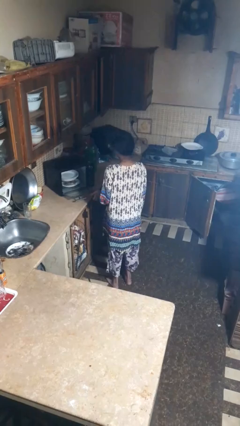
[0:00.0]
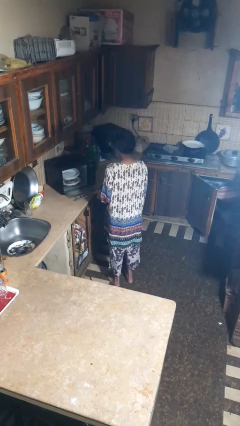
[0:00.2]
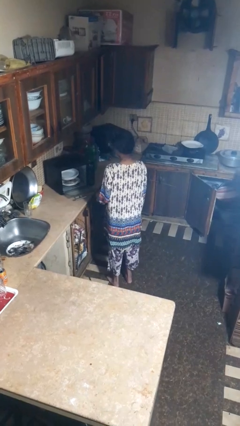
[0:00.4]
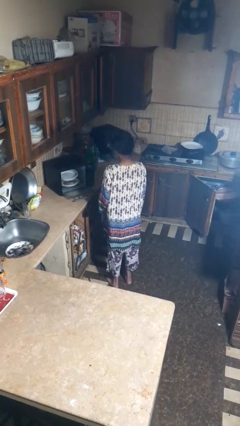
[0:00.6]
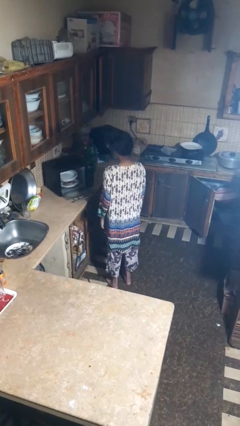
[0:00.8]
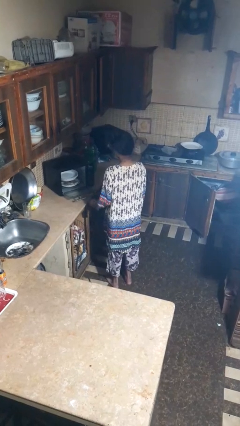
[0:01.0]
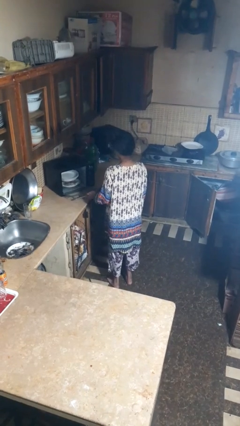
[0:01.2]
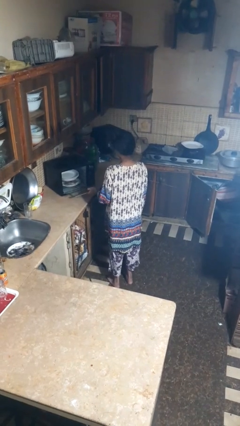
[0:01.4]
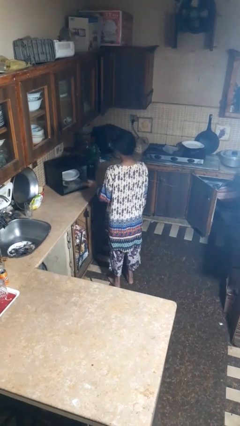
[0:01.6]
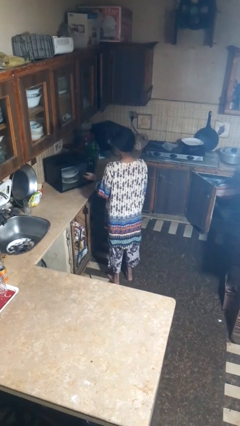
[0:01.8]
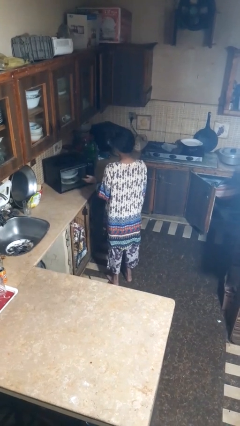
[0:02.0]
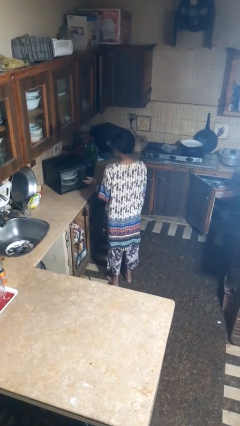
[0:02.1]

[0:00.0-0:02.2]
person closes dishwasher

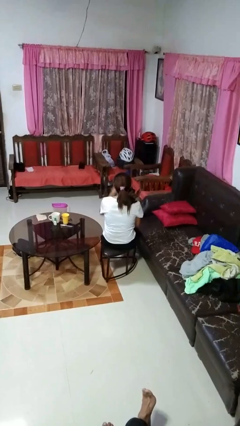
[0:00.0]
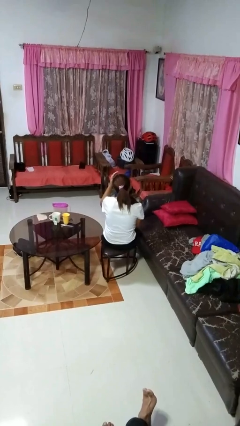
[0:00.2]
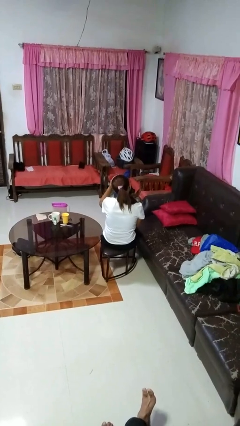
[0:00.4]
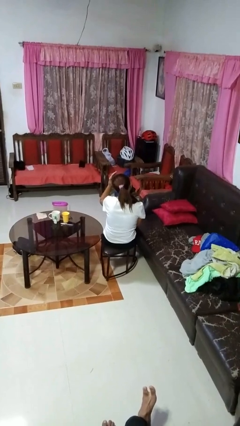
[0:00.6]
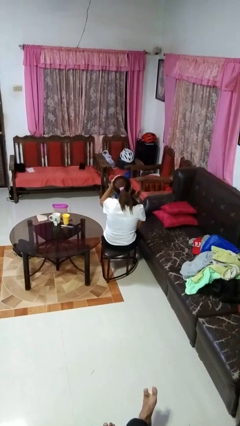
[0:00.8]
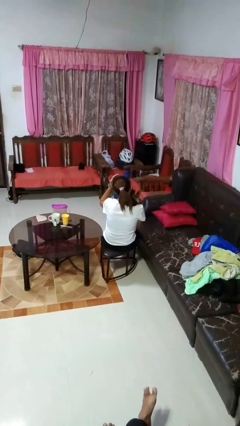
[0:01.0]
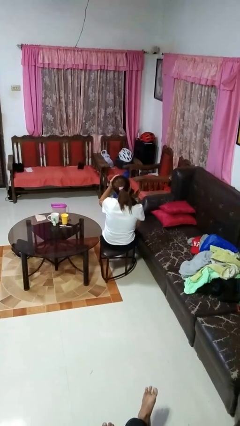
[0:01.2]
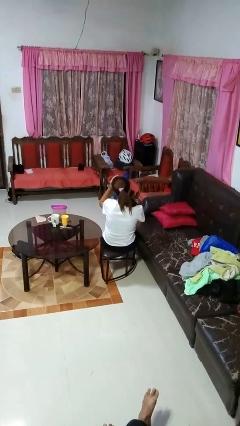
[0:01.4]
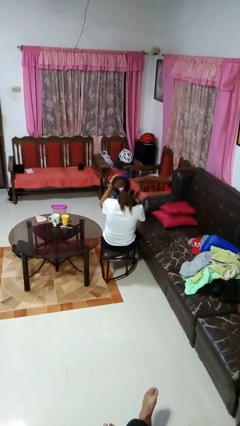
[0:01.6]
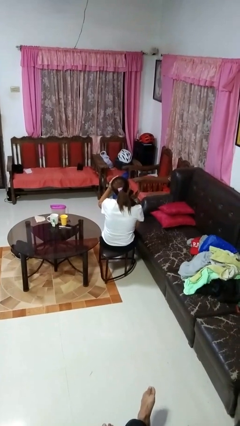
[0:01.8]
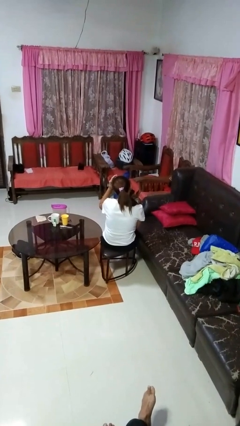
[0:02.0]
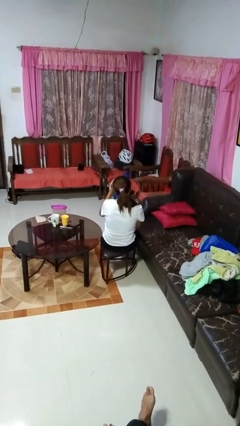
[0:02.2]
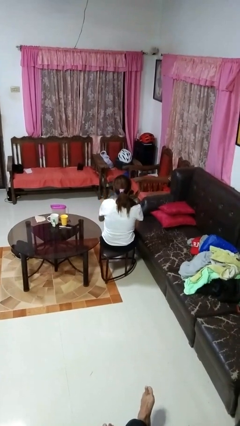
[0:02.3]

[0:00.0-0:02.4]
person pats head

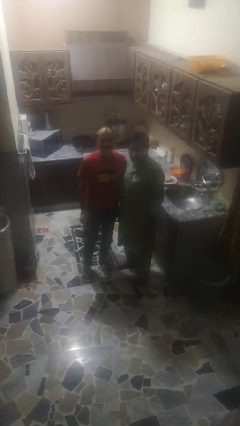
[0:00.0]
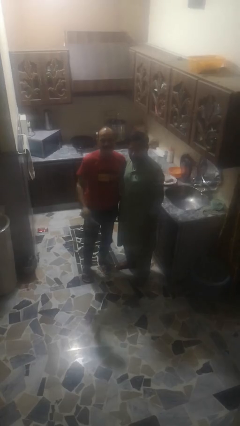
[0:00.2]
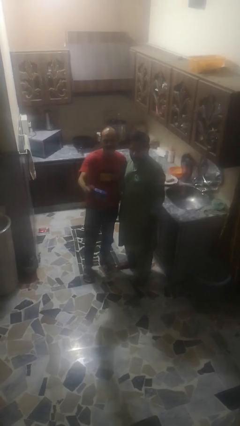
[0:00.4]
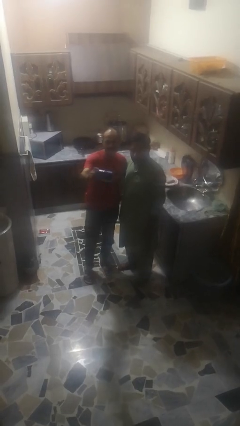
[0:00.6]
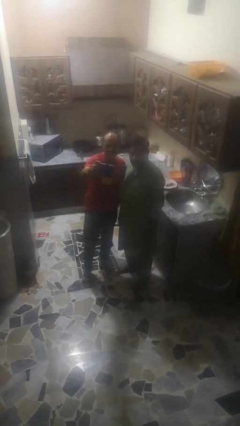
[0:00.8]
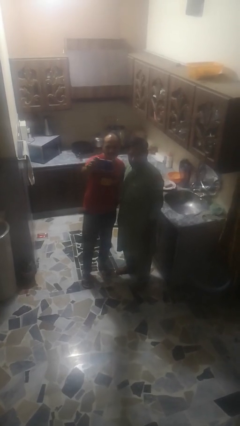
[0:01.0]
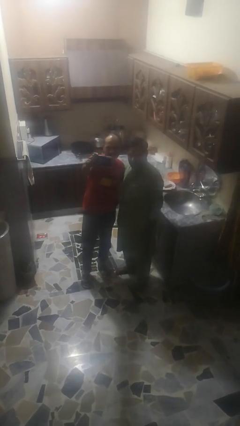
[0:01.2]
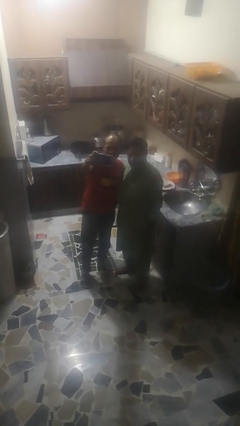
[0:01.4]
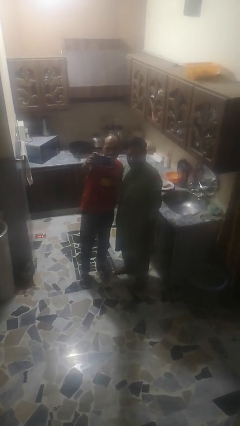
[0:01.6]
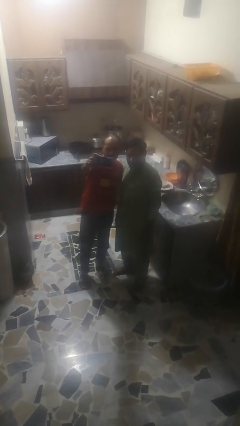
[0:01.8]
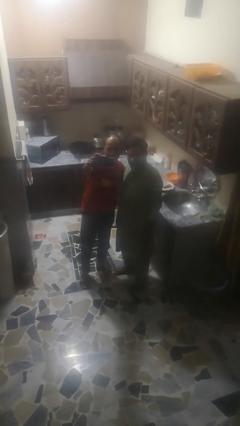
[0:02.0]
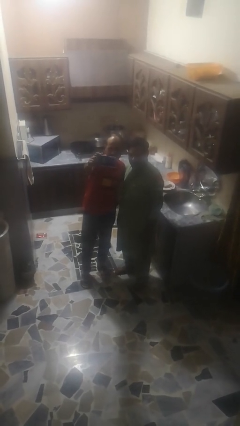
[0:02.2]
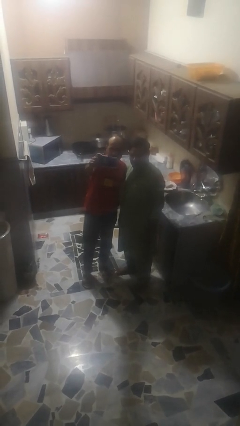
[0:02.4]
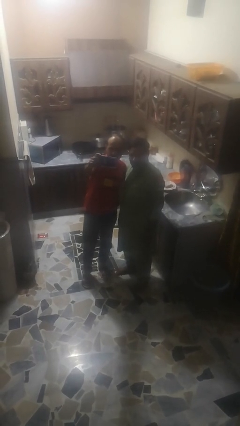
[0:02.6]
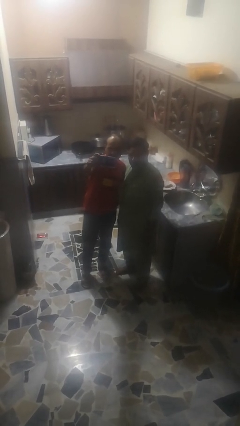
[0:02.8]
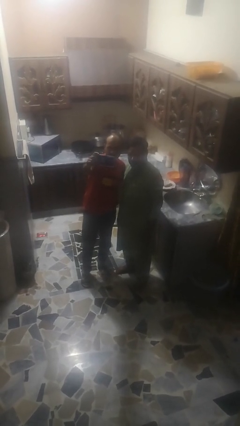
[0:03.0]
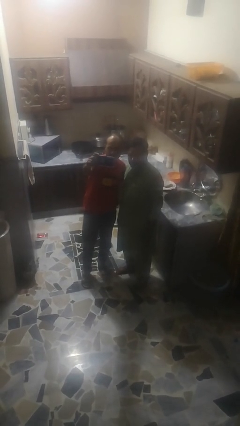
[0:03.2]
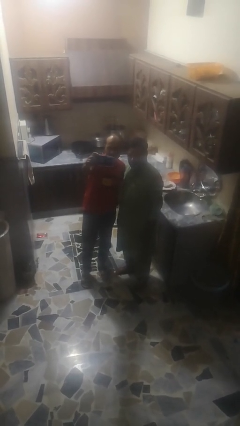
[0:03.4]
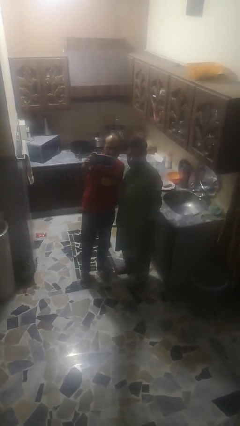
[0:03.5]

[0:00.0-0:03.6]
person takes selfie with person

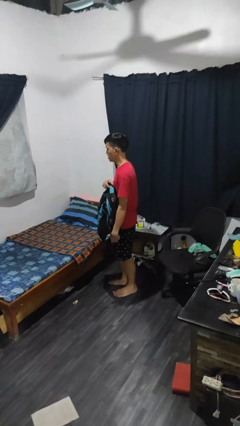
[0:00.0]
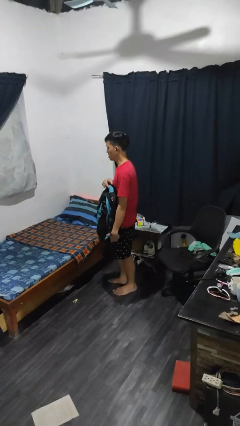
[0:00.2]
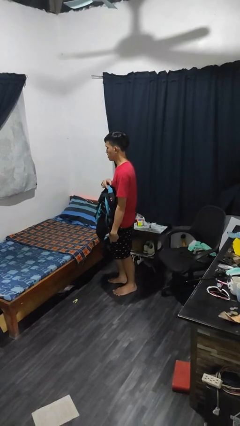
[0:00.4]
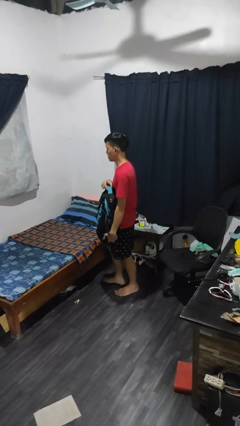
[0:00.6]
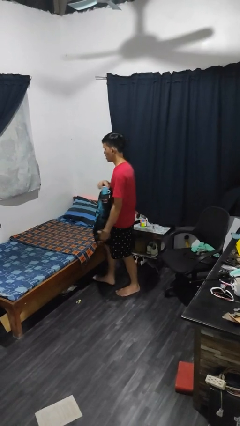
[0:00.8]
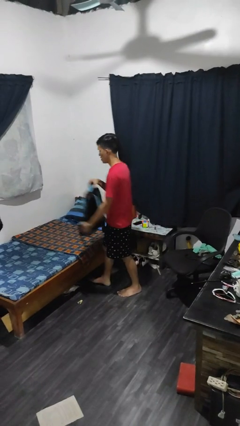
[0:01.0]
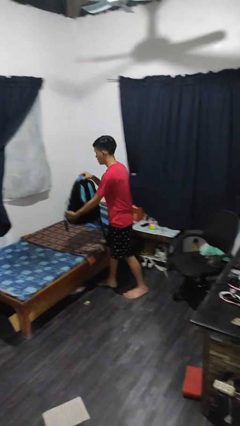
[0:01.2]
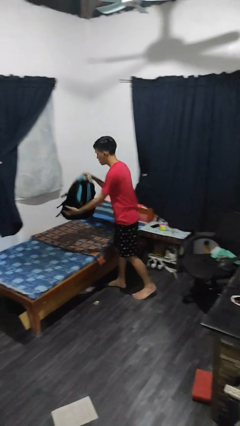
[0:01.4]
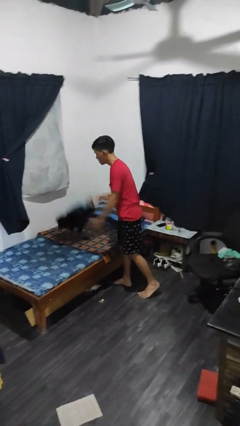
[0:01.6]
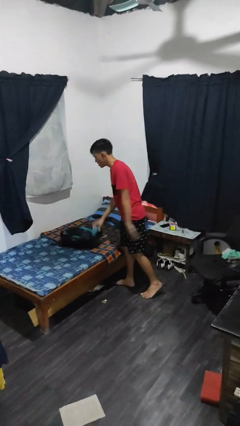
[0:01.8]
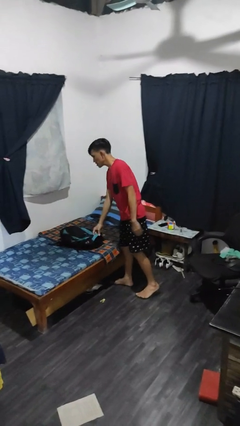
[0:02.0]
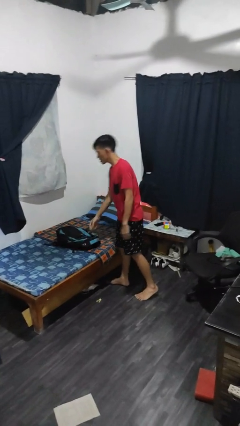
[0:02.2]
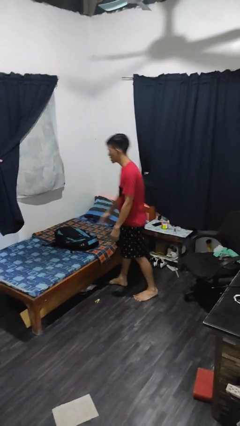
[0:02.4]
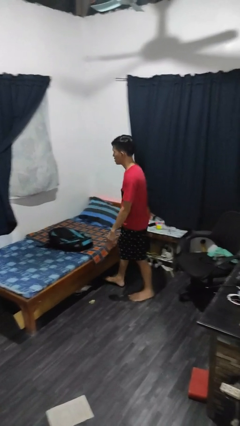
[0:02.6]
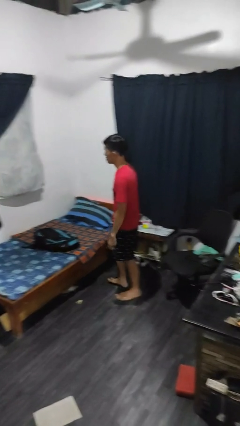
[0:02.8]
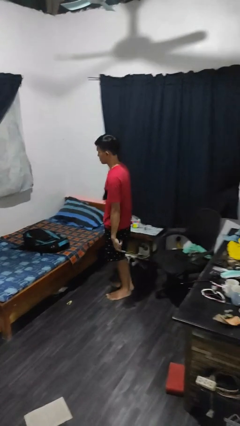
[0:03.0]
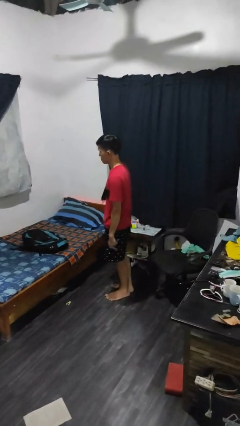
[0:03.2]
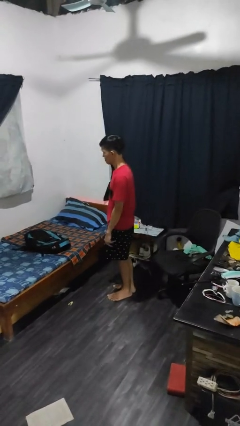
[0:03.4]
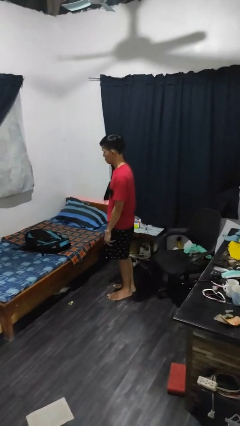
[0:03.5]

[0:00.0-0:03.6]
person puts down object on bed

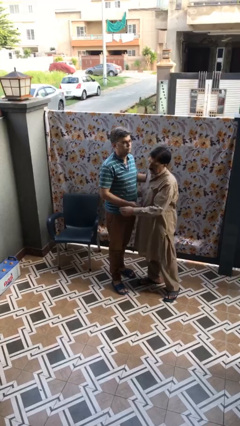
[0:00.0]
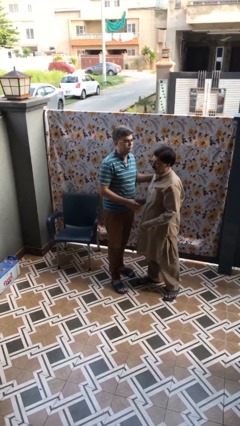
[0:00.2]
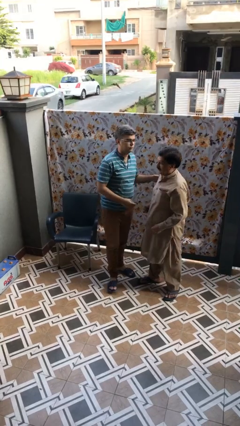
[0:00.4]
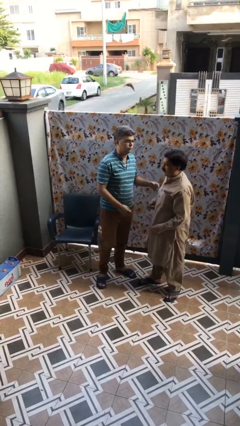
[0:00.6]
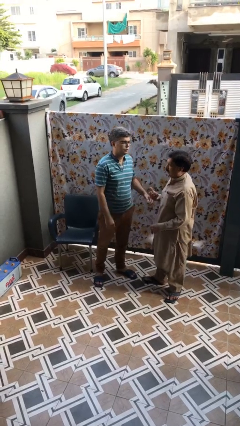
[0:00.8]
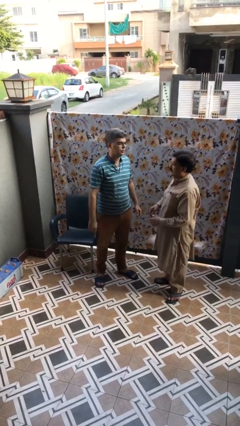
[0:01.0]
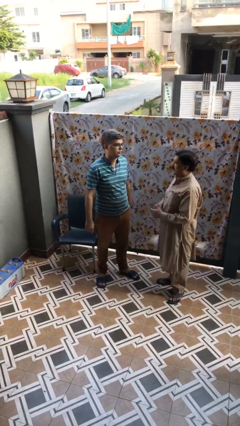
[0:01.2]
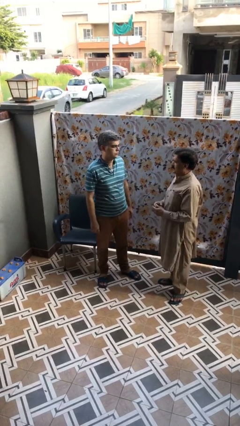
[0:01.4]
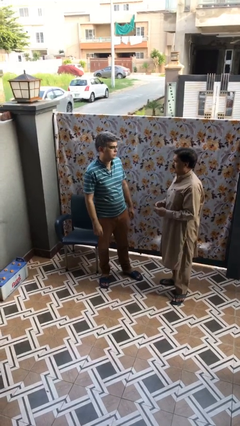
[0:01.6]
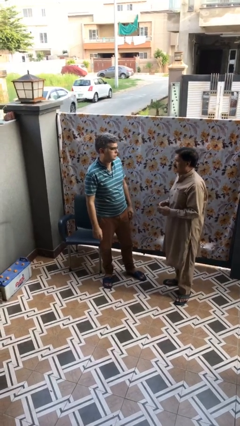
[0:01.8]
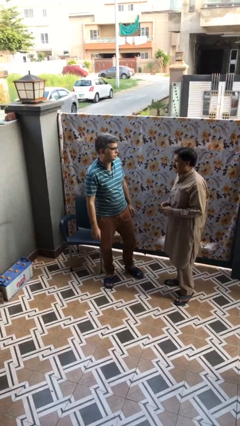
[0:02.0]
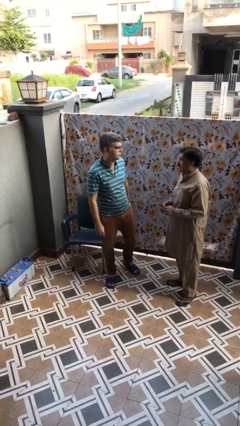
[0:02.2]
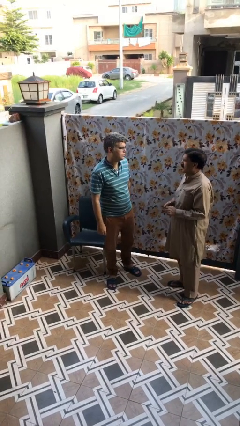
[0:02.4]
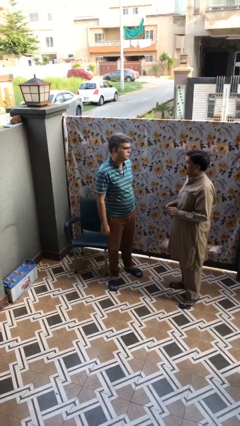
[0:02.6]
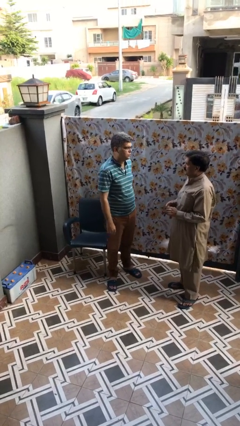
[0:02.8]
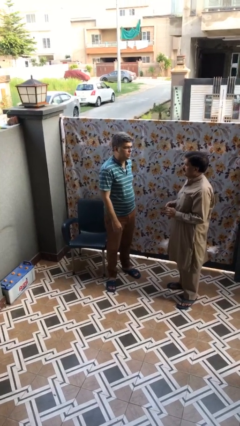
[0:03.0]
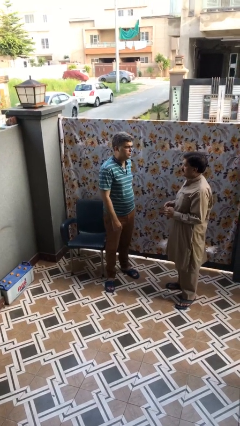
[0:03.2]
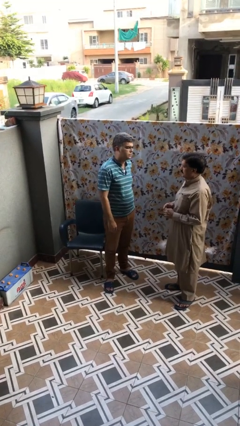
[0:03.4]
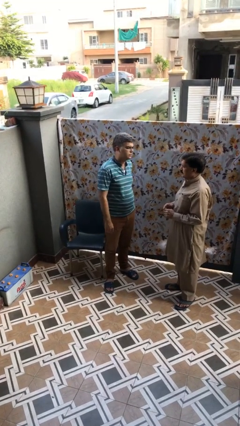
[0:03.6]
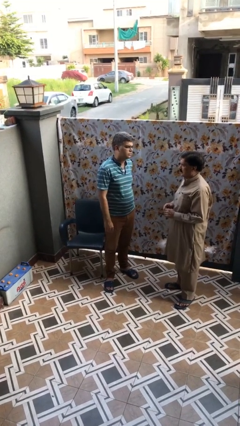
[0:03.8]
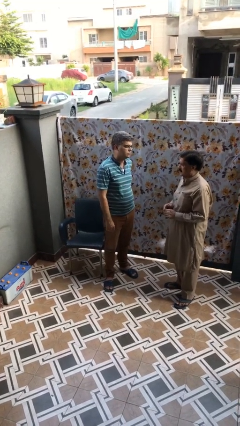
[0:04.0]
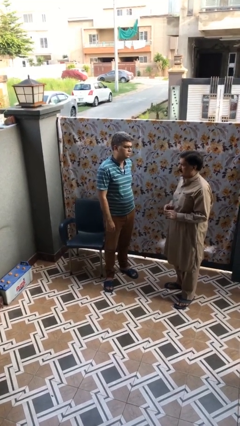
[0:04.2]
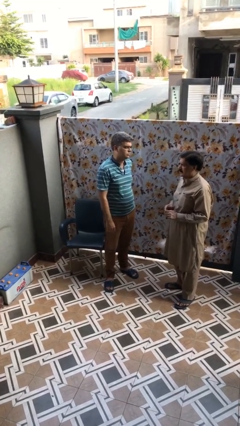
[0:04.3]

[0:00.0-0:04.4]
person talks to person

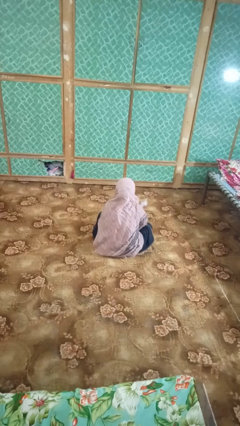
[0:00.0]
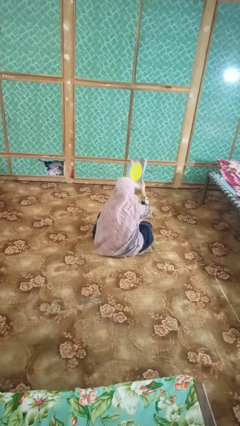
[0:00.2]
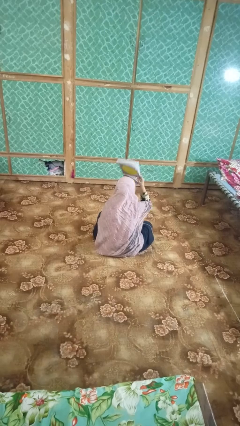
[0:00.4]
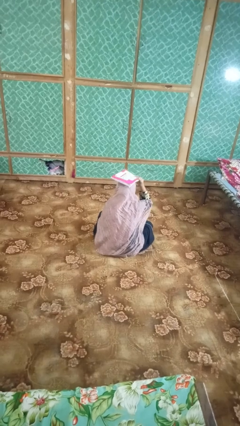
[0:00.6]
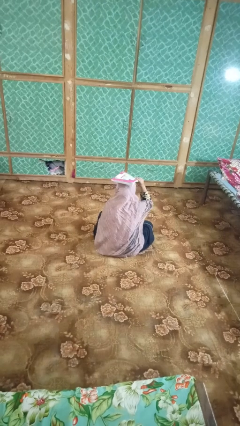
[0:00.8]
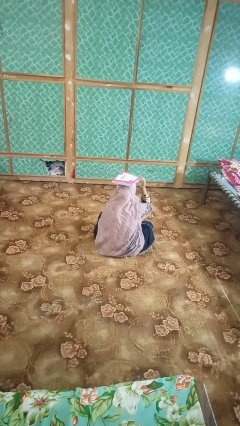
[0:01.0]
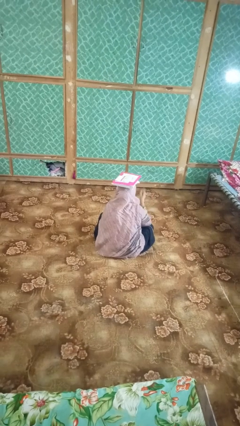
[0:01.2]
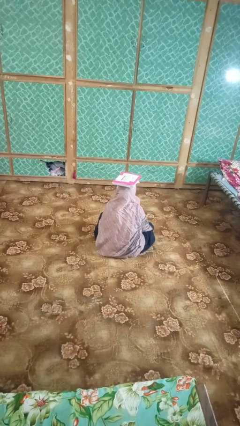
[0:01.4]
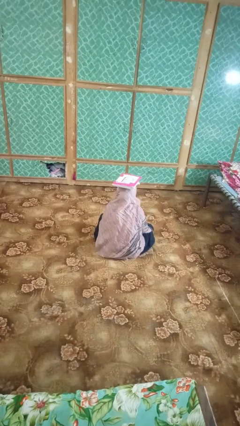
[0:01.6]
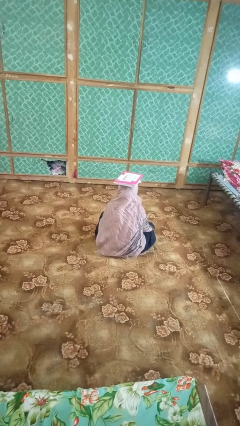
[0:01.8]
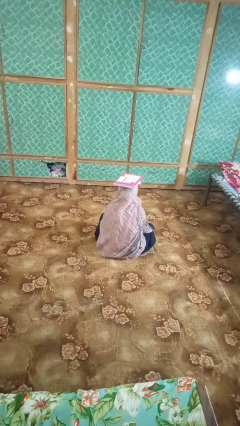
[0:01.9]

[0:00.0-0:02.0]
person holds object above head
